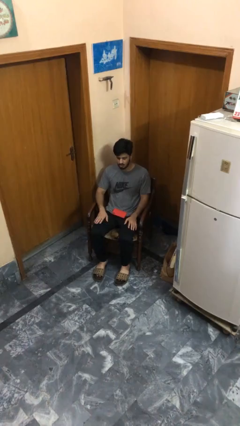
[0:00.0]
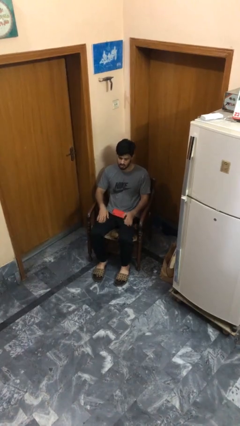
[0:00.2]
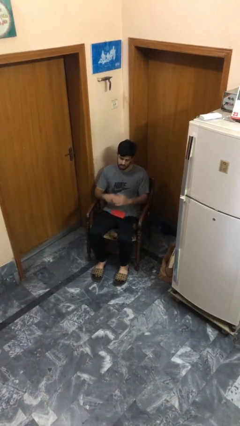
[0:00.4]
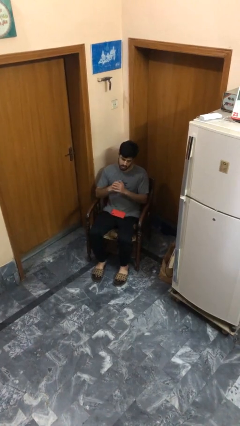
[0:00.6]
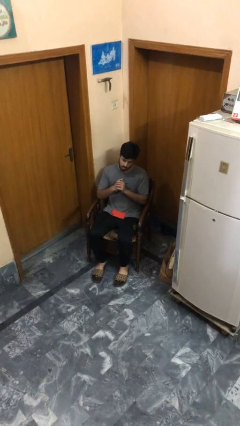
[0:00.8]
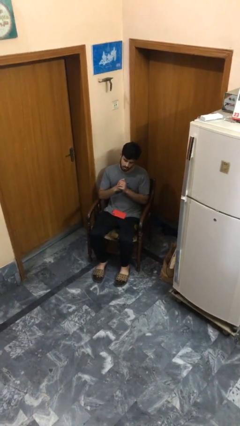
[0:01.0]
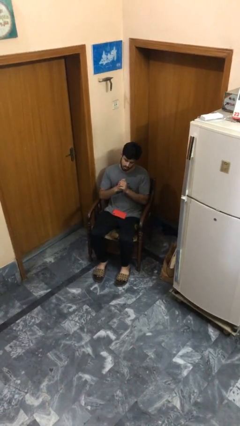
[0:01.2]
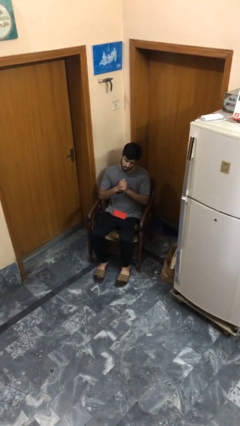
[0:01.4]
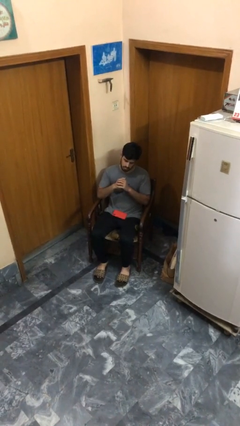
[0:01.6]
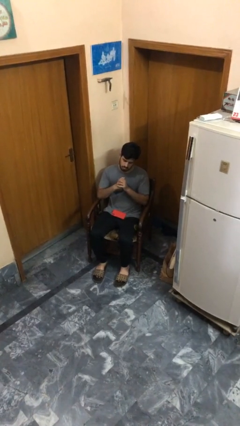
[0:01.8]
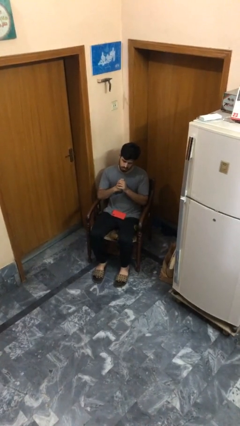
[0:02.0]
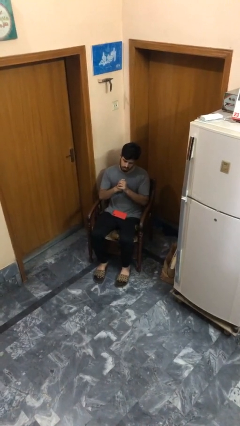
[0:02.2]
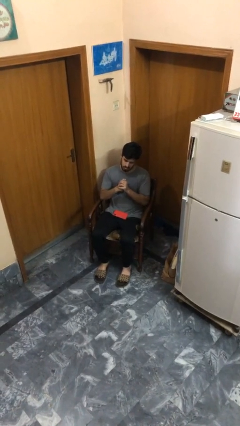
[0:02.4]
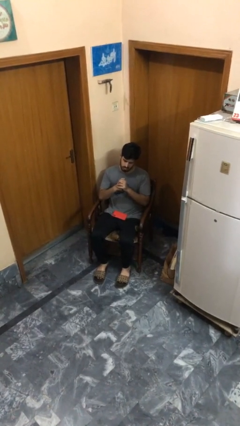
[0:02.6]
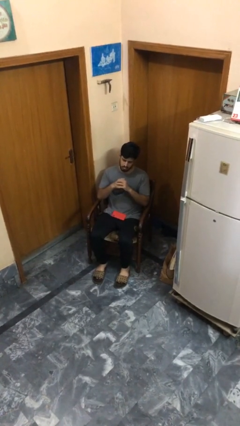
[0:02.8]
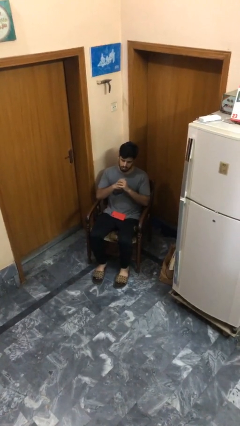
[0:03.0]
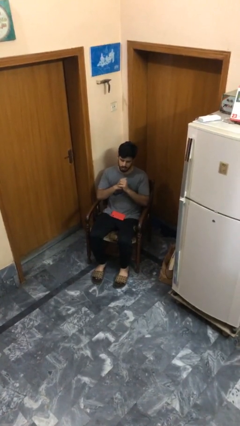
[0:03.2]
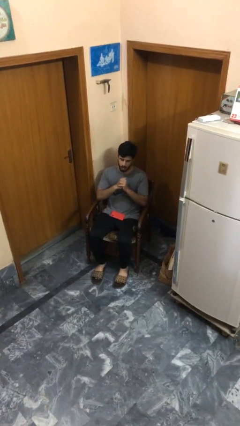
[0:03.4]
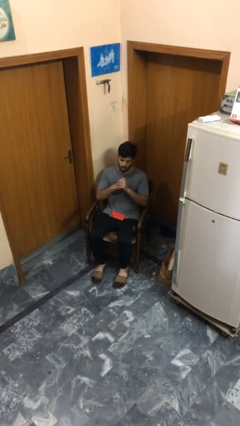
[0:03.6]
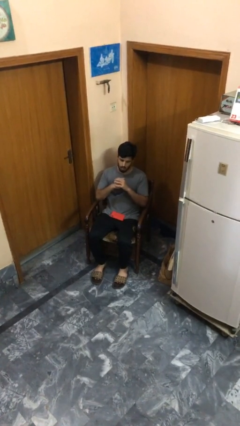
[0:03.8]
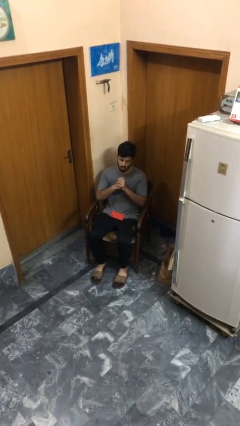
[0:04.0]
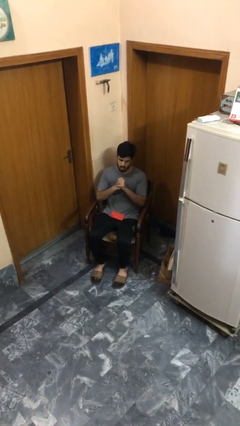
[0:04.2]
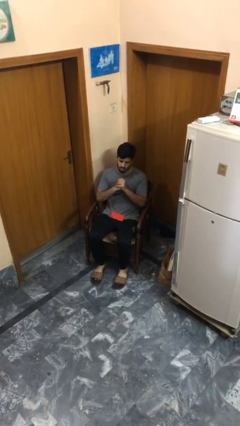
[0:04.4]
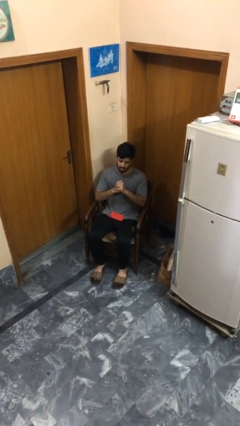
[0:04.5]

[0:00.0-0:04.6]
person cracks knuckles

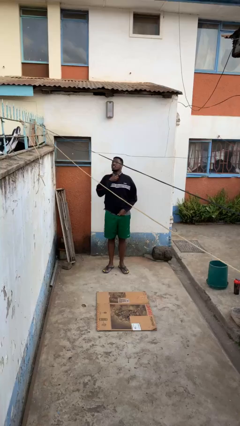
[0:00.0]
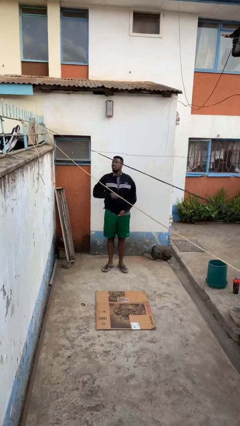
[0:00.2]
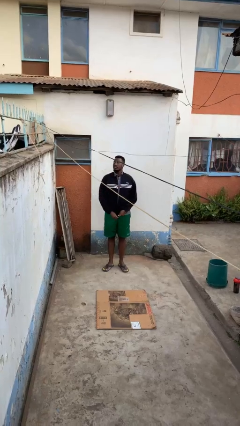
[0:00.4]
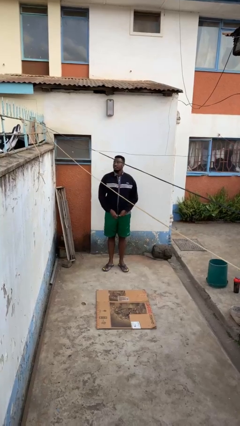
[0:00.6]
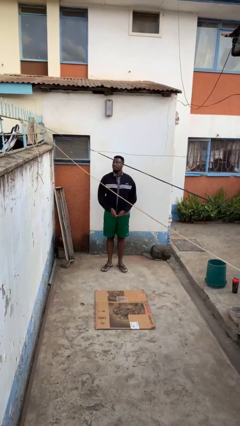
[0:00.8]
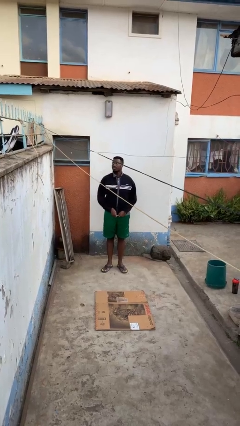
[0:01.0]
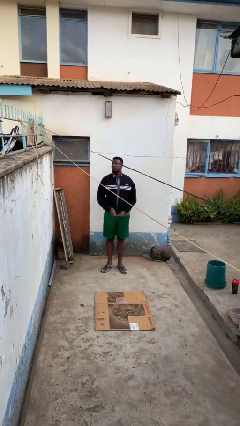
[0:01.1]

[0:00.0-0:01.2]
person unzips jacket

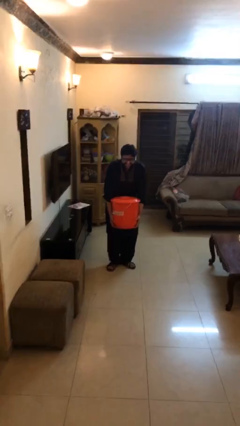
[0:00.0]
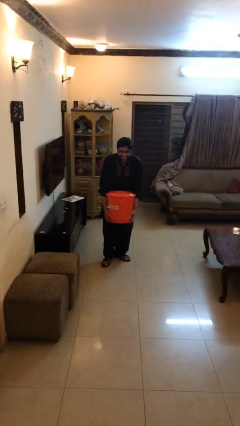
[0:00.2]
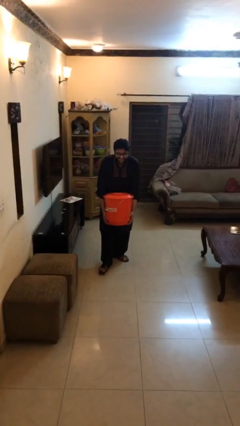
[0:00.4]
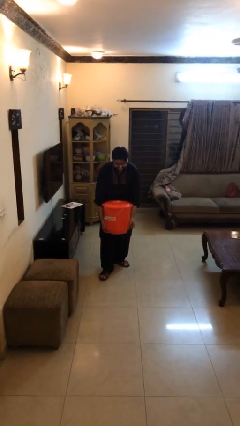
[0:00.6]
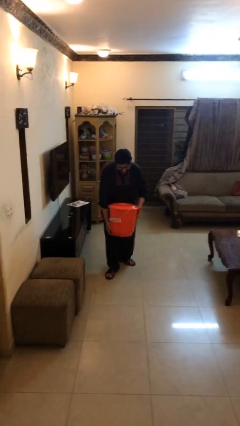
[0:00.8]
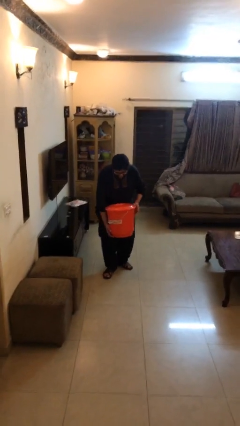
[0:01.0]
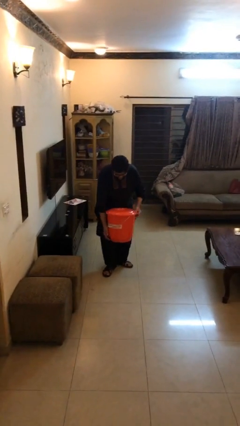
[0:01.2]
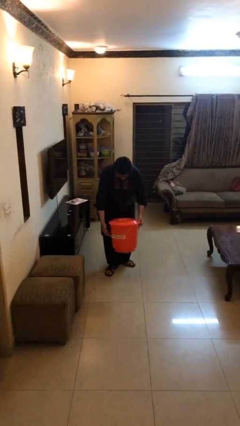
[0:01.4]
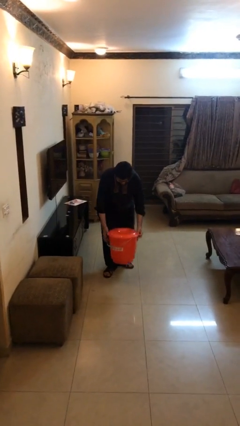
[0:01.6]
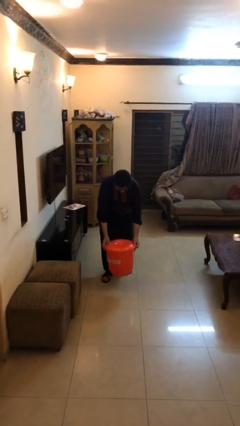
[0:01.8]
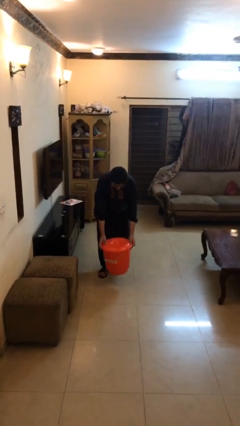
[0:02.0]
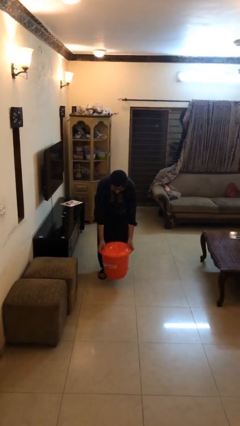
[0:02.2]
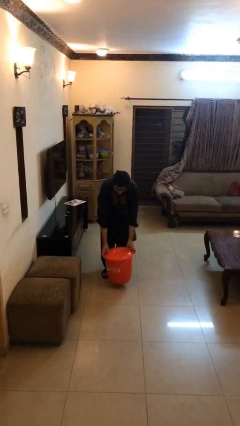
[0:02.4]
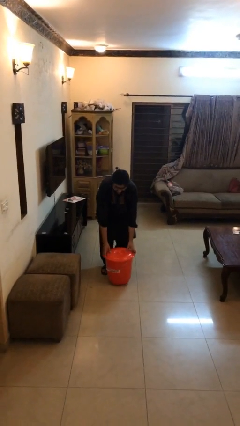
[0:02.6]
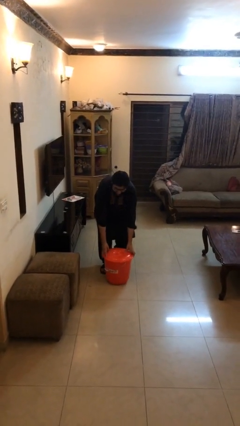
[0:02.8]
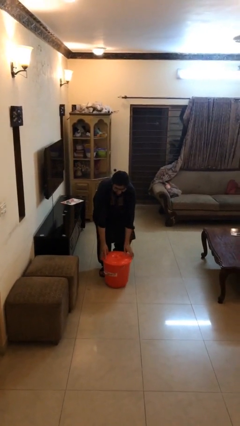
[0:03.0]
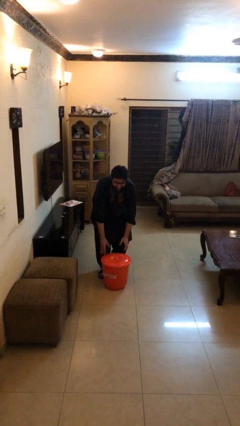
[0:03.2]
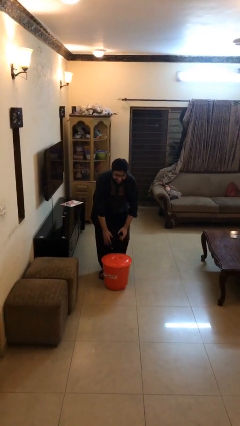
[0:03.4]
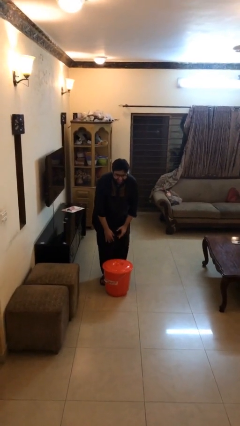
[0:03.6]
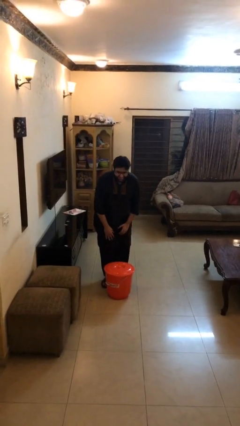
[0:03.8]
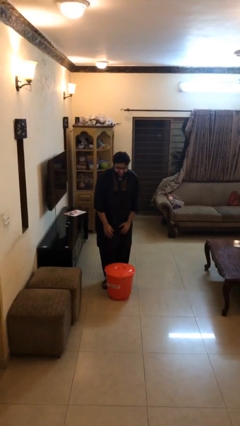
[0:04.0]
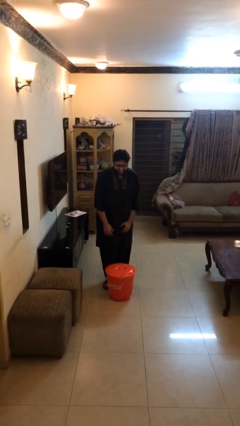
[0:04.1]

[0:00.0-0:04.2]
person puts down object on floor

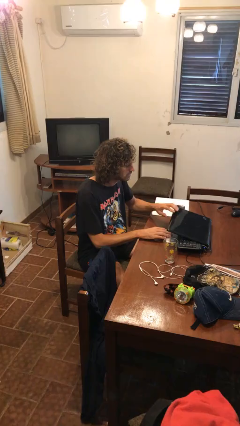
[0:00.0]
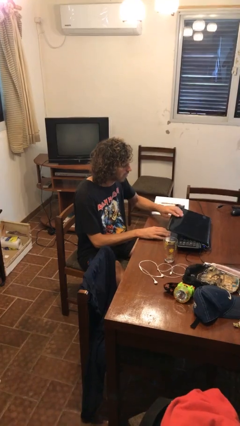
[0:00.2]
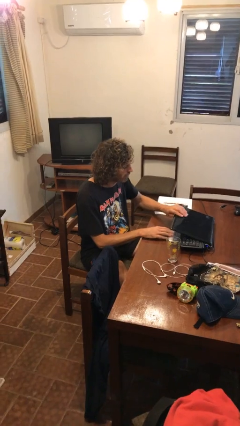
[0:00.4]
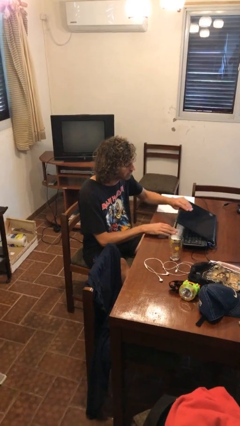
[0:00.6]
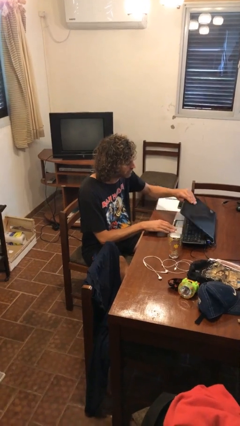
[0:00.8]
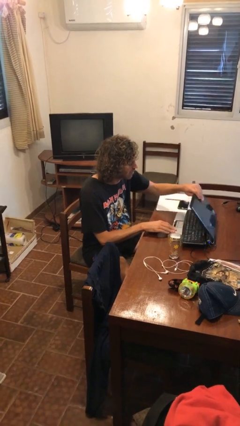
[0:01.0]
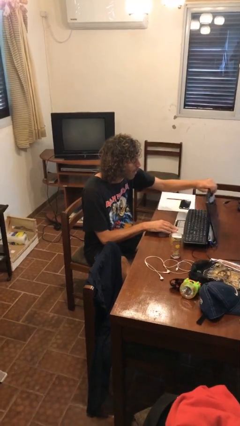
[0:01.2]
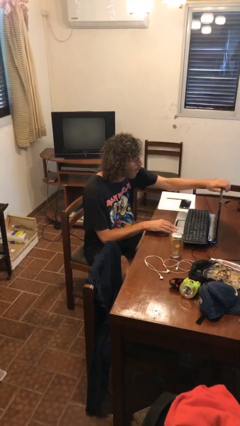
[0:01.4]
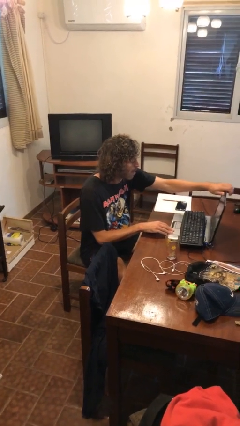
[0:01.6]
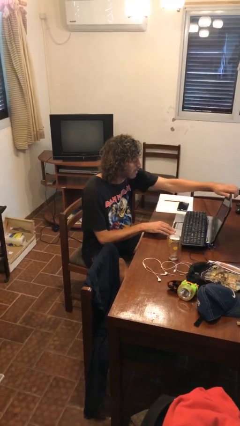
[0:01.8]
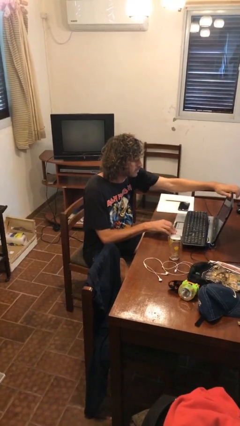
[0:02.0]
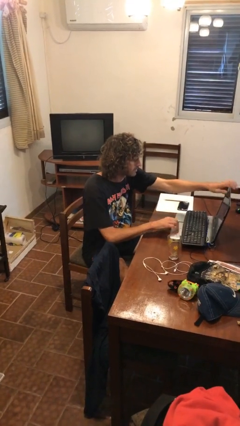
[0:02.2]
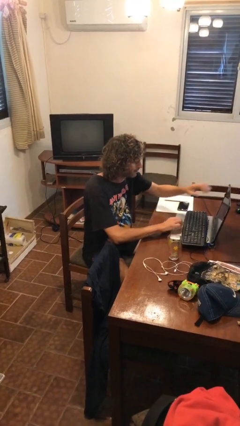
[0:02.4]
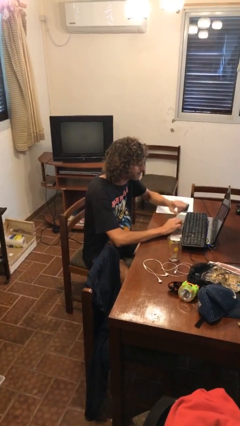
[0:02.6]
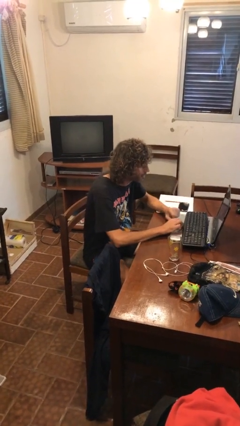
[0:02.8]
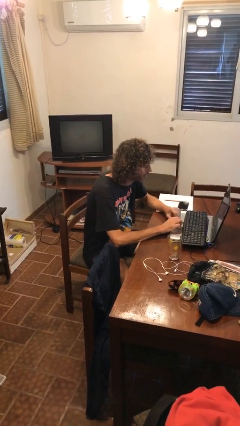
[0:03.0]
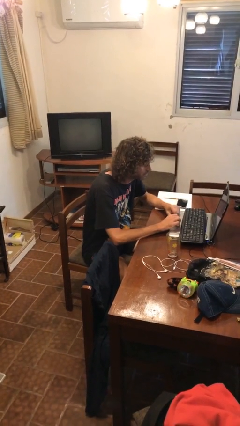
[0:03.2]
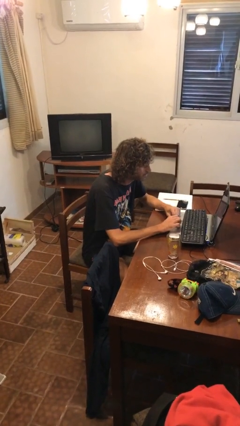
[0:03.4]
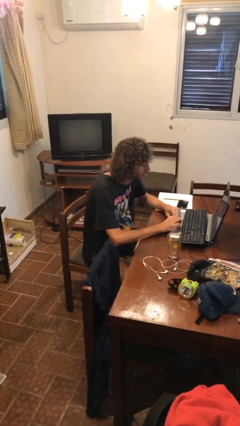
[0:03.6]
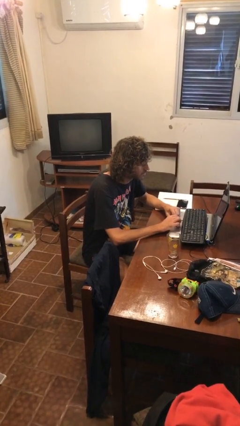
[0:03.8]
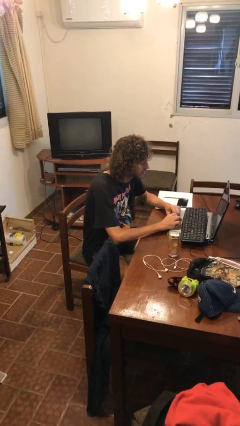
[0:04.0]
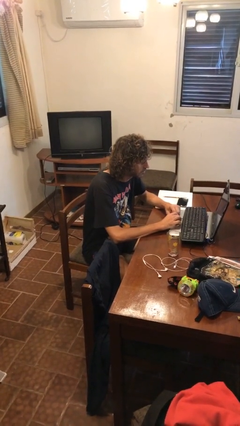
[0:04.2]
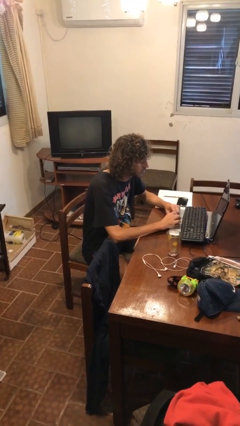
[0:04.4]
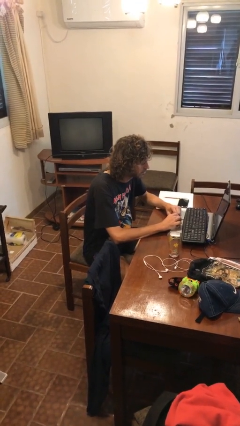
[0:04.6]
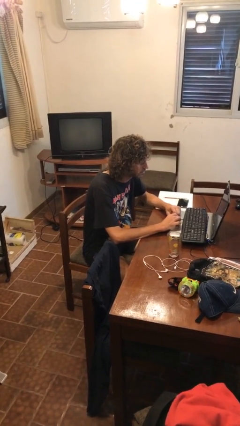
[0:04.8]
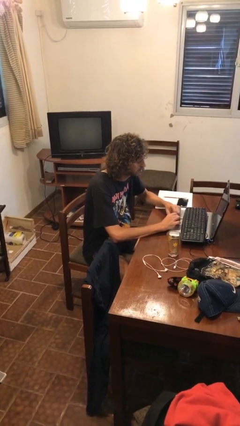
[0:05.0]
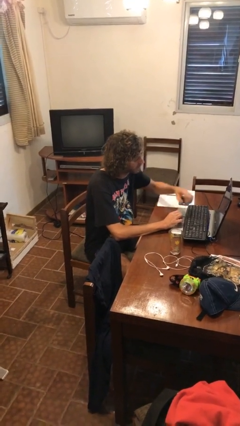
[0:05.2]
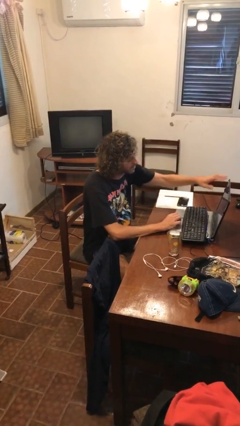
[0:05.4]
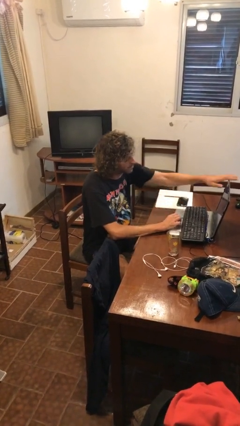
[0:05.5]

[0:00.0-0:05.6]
person interacts with laptop

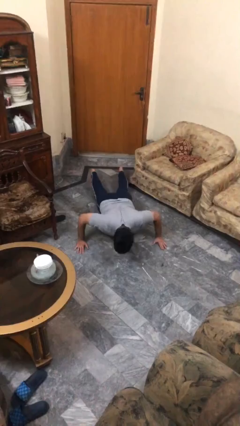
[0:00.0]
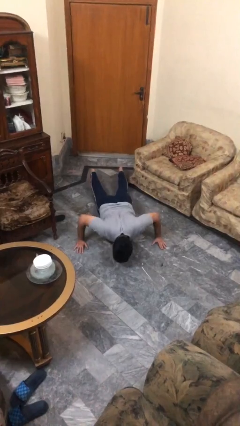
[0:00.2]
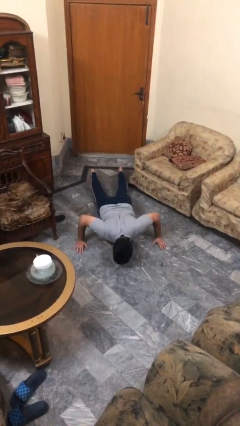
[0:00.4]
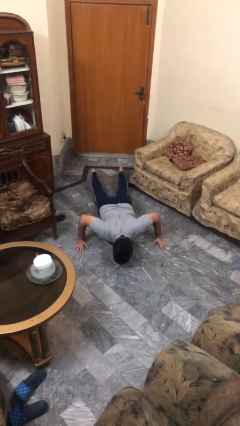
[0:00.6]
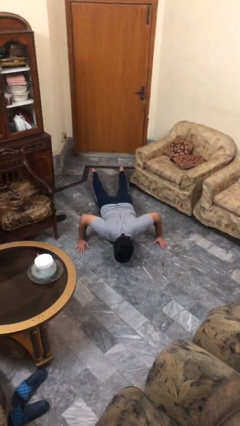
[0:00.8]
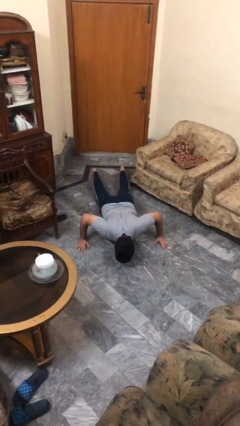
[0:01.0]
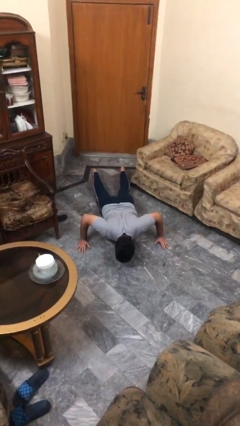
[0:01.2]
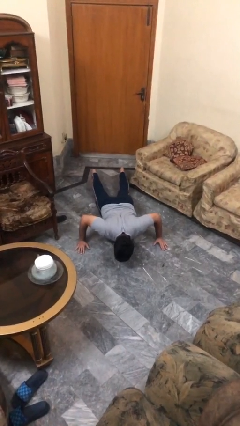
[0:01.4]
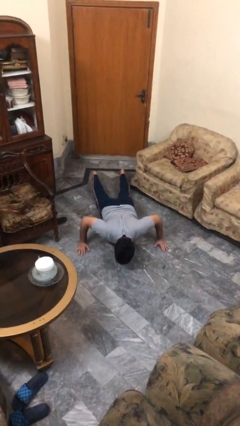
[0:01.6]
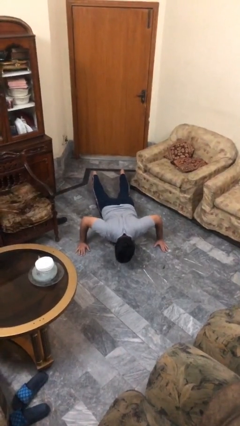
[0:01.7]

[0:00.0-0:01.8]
person exercises with pushup

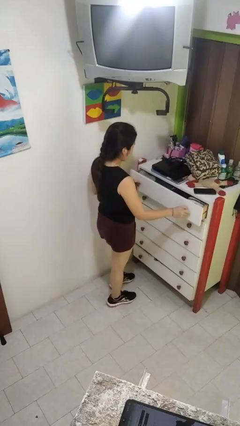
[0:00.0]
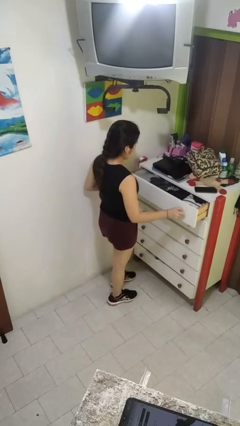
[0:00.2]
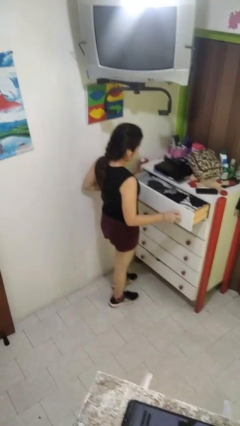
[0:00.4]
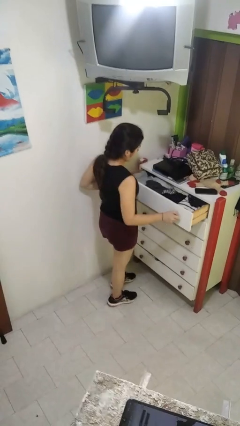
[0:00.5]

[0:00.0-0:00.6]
person opens dresser drawer
